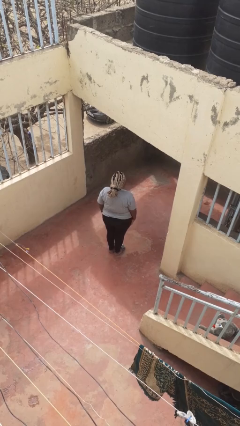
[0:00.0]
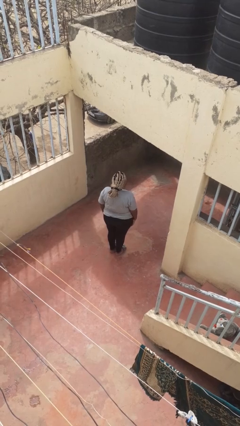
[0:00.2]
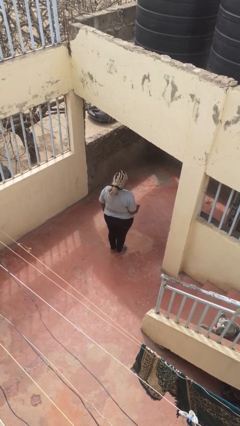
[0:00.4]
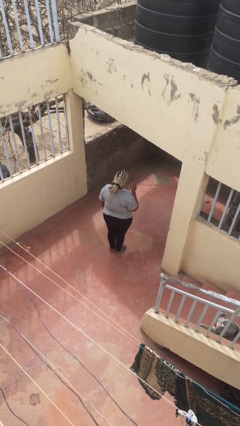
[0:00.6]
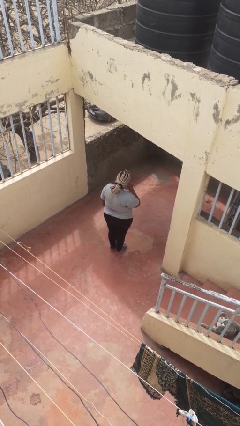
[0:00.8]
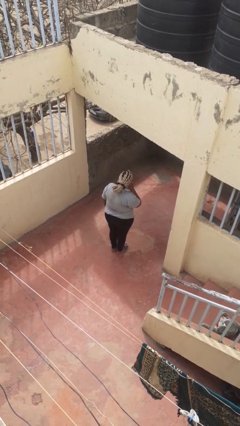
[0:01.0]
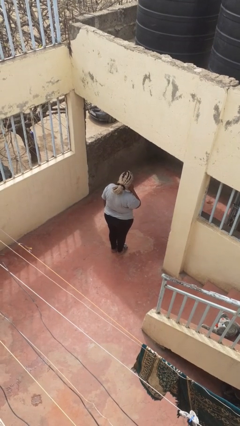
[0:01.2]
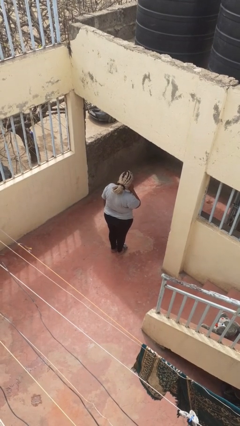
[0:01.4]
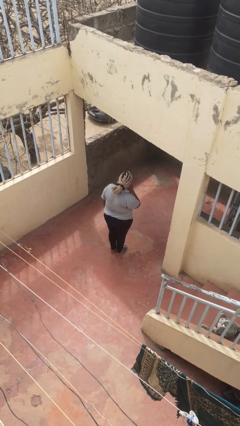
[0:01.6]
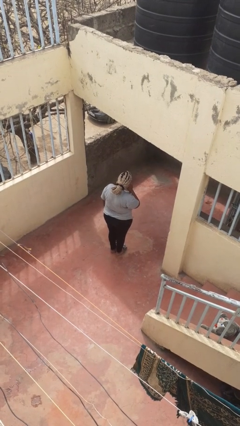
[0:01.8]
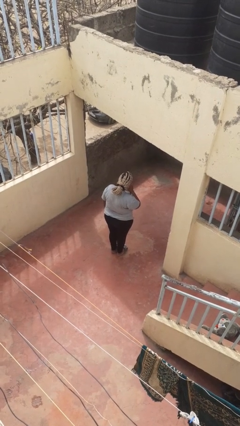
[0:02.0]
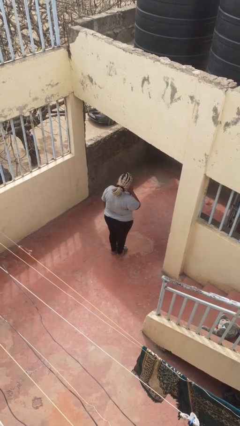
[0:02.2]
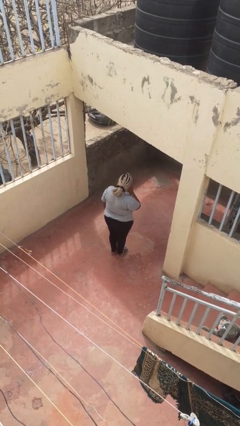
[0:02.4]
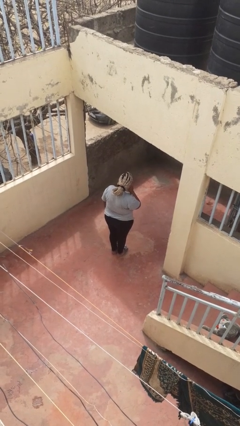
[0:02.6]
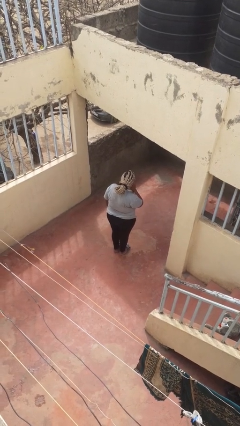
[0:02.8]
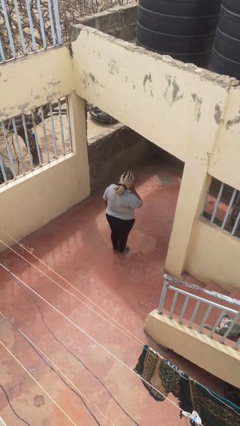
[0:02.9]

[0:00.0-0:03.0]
person gestures listen closely

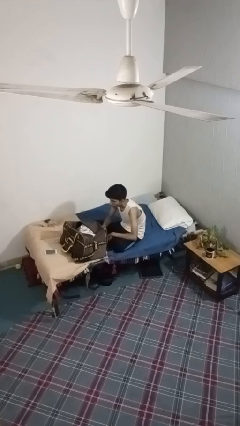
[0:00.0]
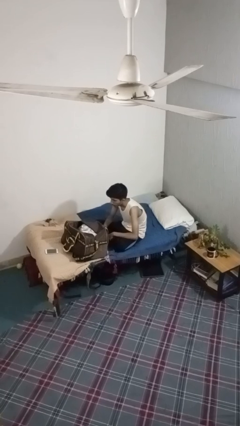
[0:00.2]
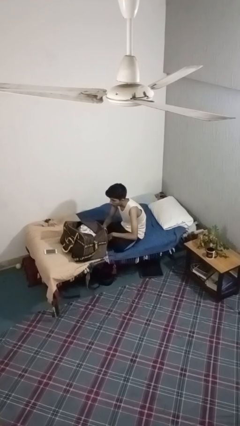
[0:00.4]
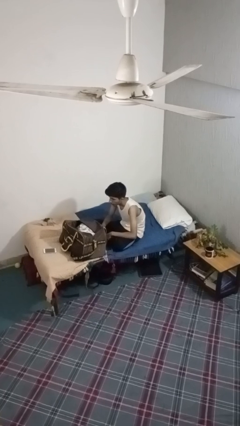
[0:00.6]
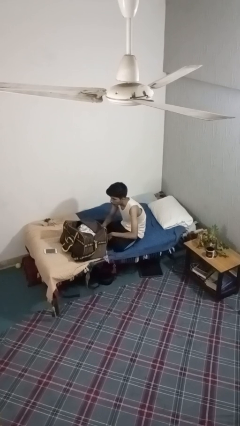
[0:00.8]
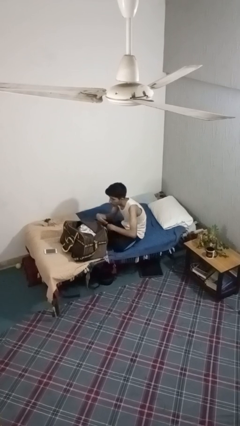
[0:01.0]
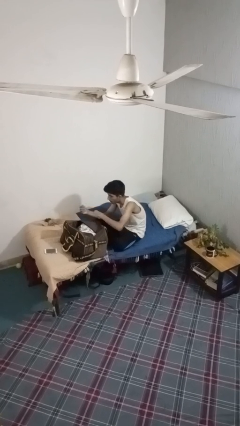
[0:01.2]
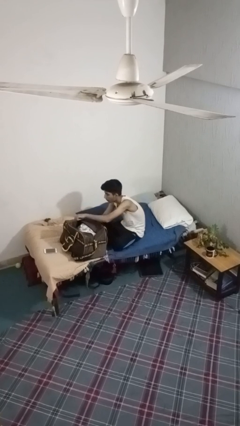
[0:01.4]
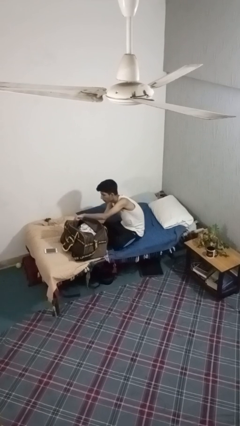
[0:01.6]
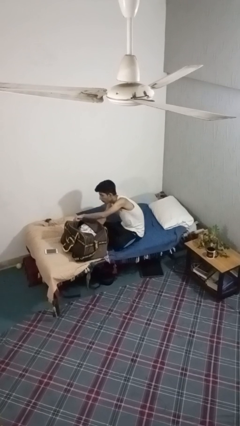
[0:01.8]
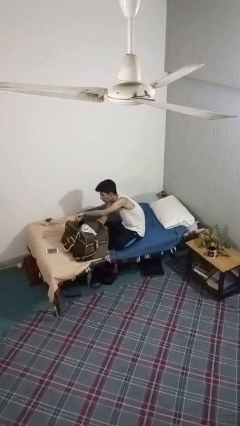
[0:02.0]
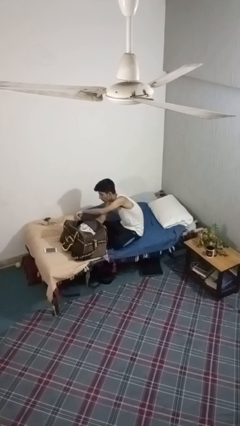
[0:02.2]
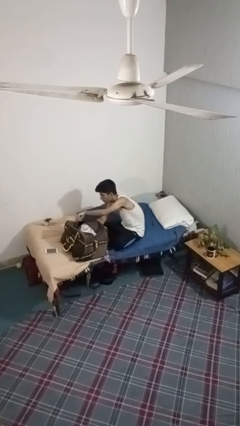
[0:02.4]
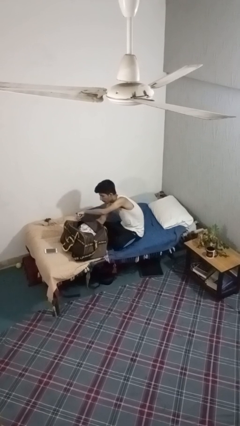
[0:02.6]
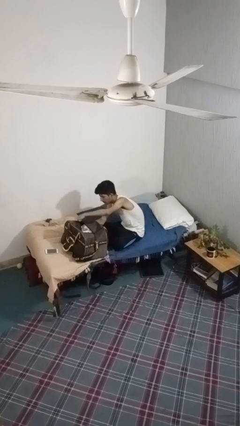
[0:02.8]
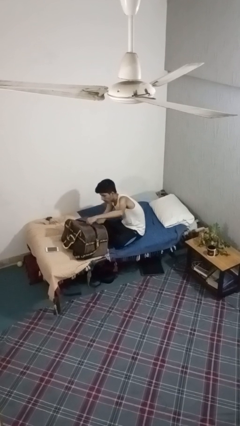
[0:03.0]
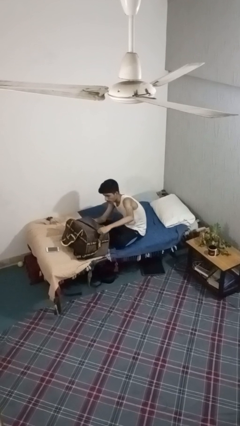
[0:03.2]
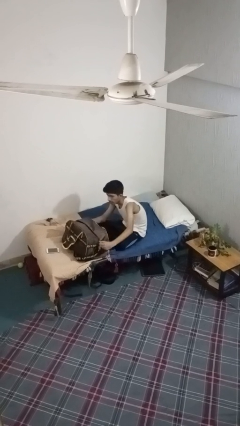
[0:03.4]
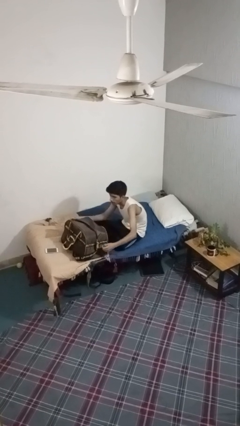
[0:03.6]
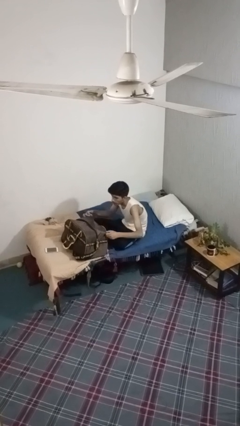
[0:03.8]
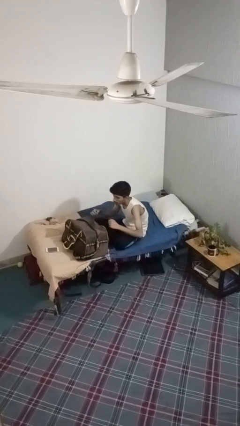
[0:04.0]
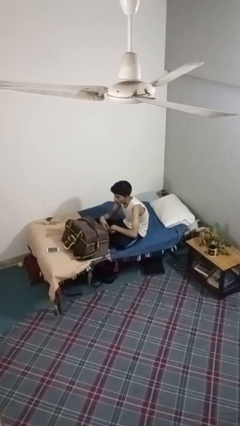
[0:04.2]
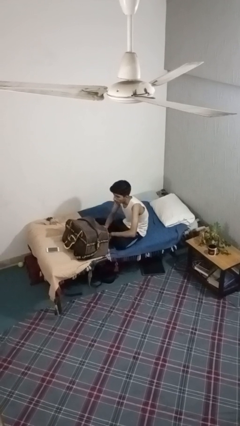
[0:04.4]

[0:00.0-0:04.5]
person closes suitcase

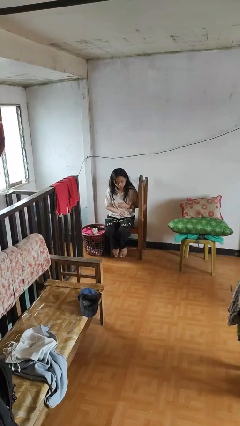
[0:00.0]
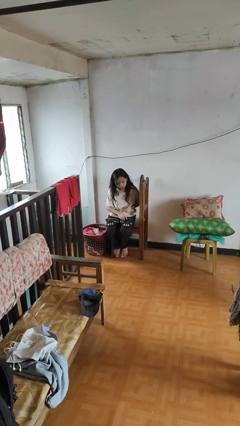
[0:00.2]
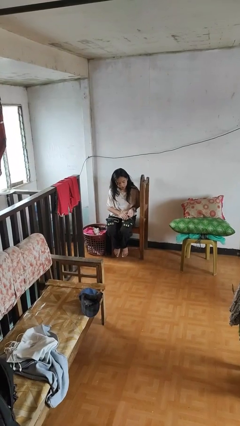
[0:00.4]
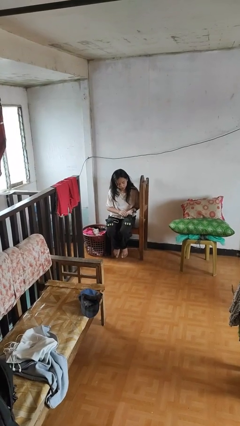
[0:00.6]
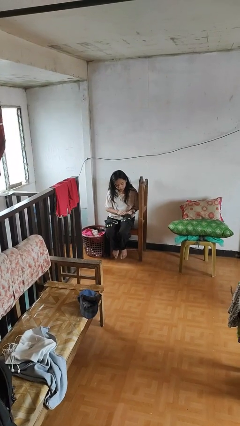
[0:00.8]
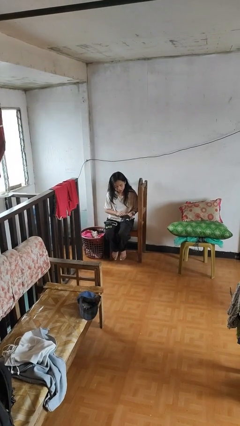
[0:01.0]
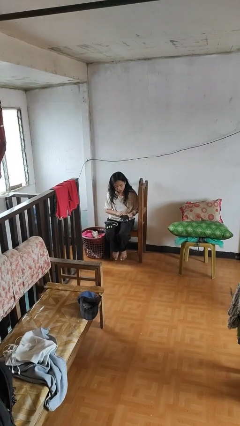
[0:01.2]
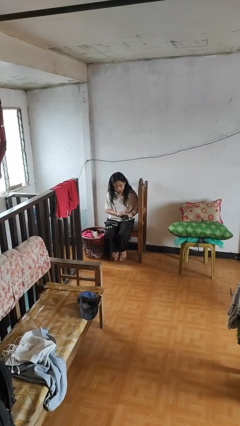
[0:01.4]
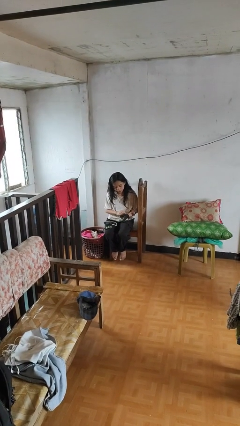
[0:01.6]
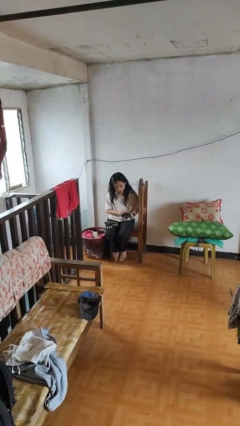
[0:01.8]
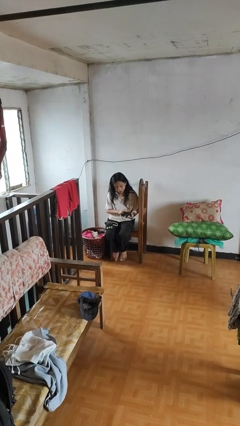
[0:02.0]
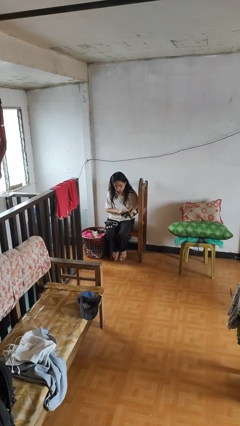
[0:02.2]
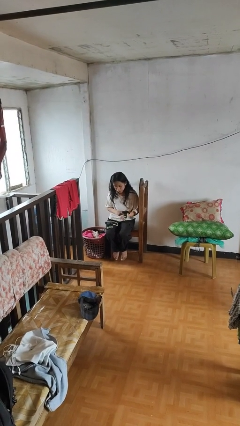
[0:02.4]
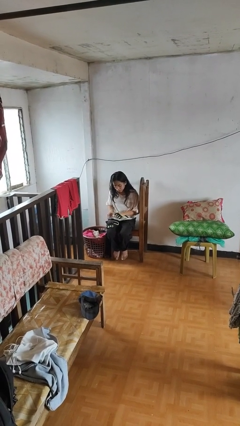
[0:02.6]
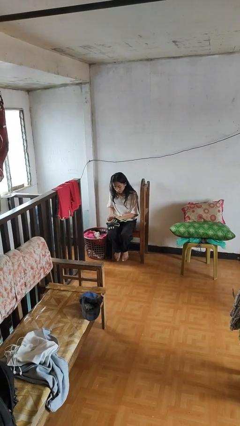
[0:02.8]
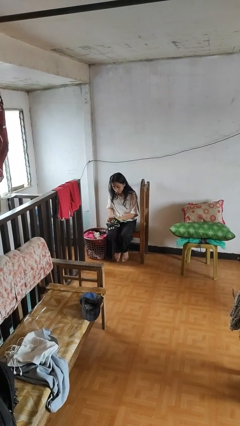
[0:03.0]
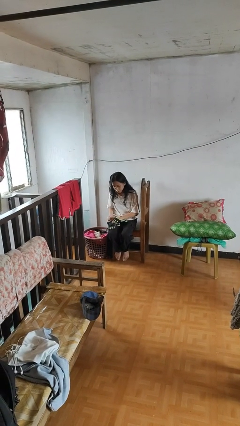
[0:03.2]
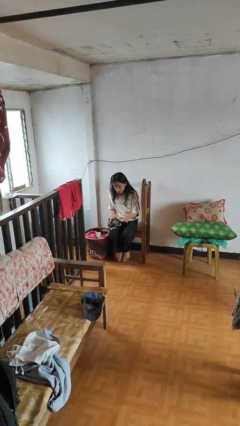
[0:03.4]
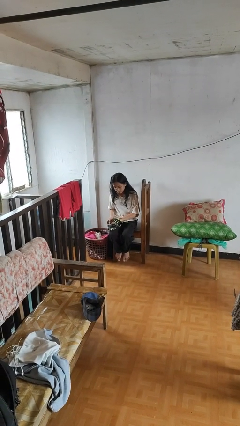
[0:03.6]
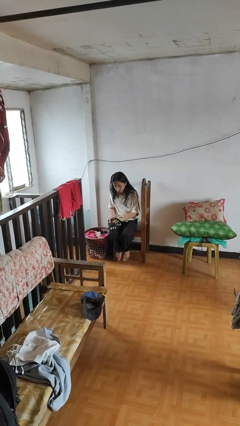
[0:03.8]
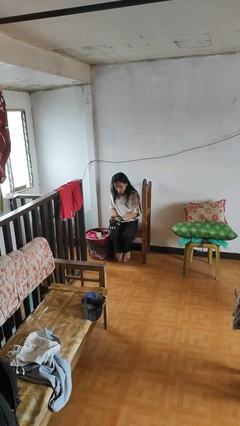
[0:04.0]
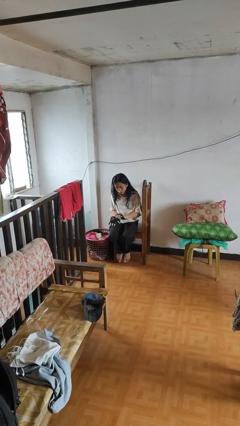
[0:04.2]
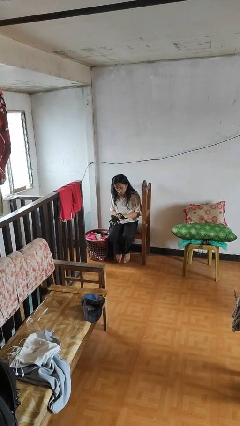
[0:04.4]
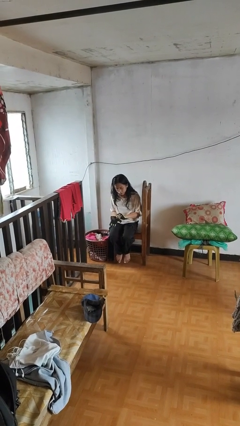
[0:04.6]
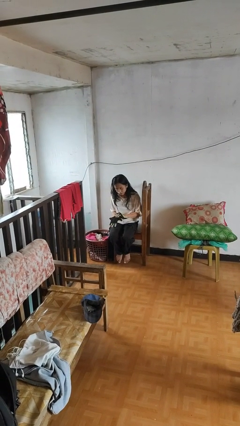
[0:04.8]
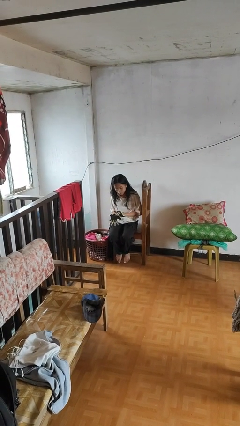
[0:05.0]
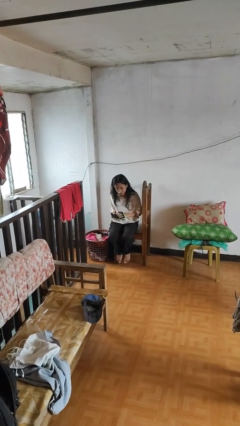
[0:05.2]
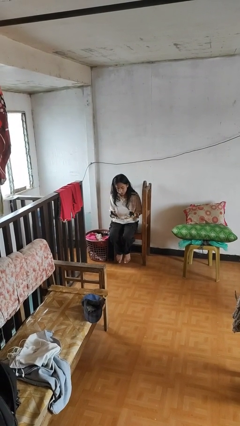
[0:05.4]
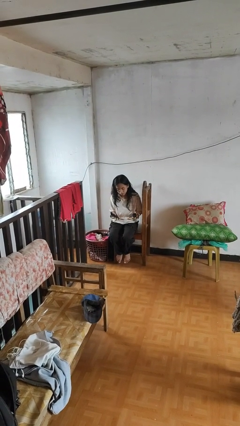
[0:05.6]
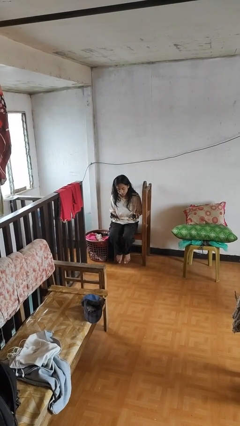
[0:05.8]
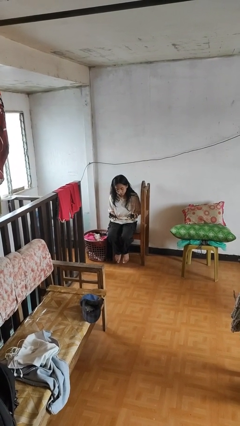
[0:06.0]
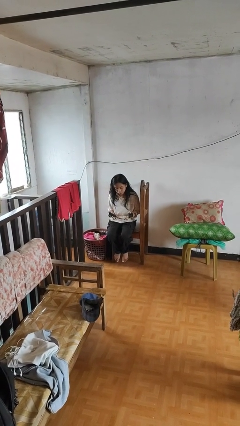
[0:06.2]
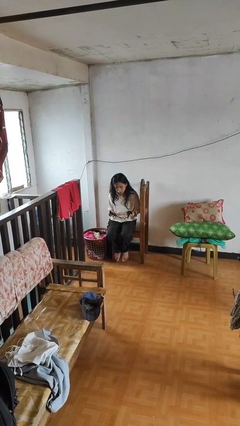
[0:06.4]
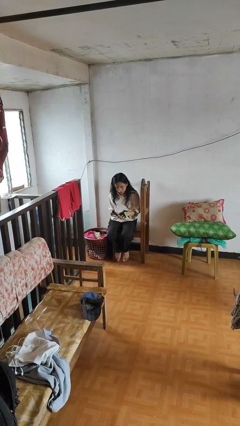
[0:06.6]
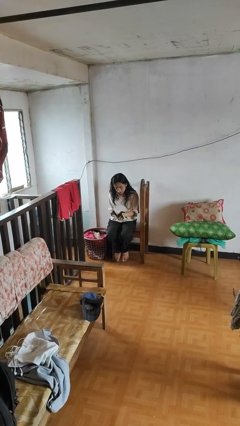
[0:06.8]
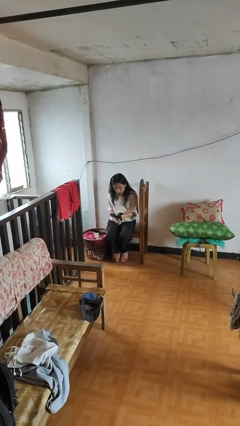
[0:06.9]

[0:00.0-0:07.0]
person puts on gloves

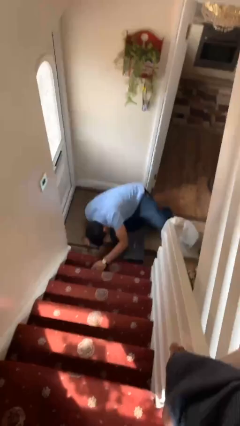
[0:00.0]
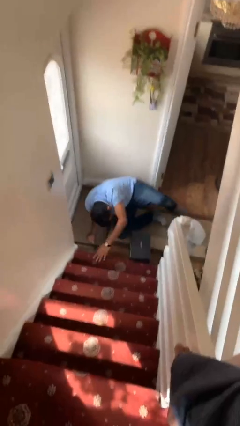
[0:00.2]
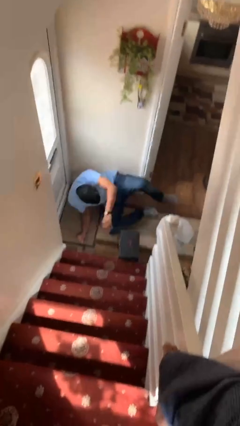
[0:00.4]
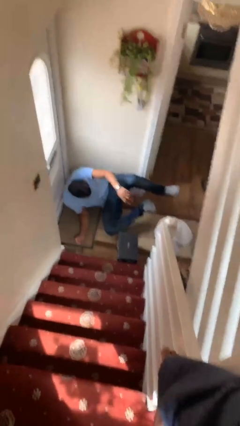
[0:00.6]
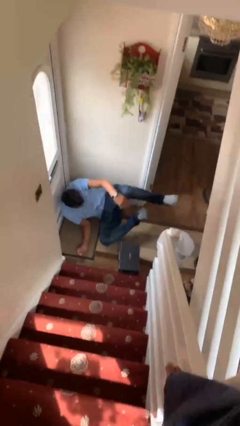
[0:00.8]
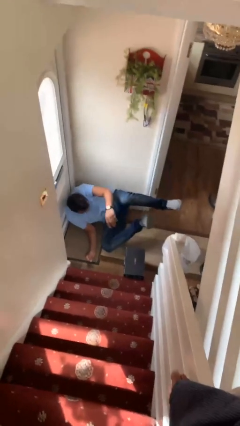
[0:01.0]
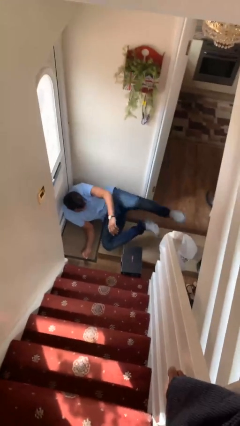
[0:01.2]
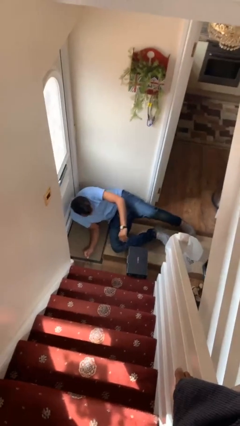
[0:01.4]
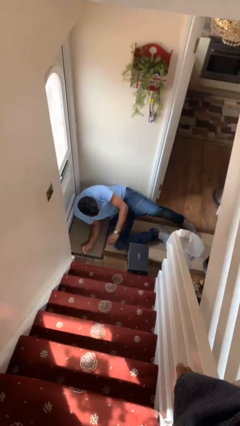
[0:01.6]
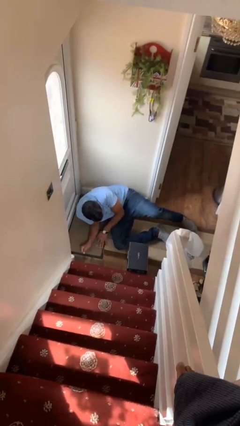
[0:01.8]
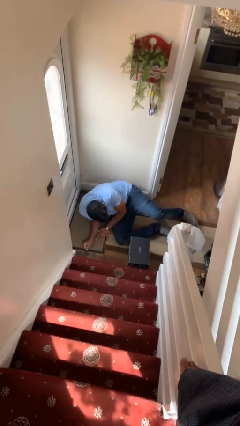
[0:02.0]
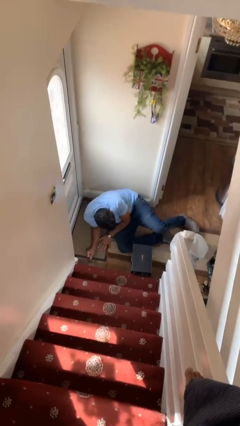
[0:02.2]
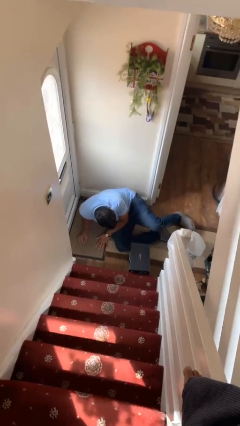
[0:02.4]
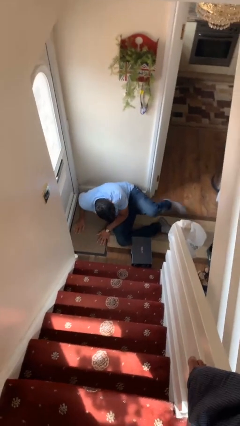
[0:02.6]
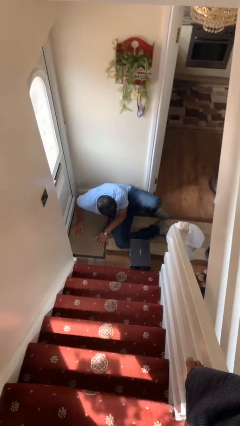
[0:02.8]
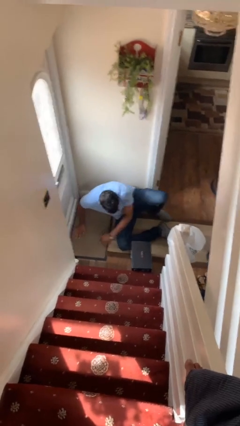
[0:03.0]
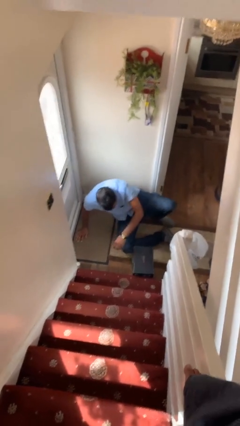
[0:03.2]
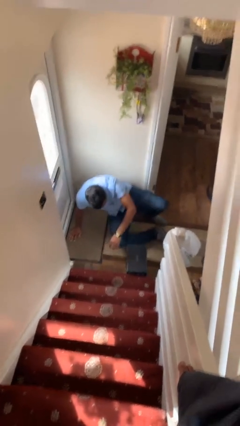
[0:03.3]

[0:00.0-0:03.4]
person lies down on floor
